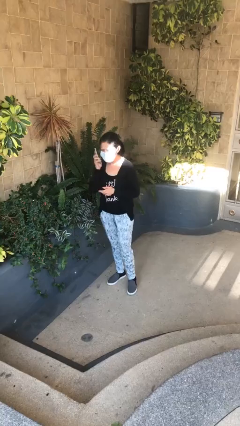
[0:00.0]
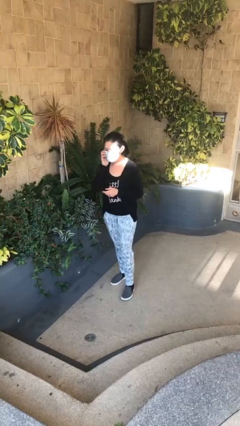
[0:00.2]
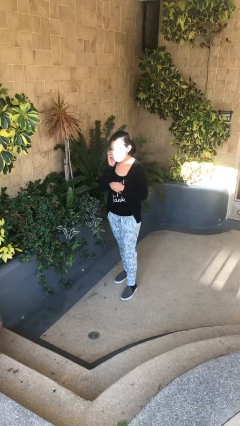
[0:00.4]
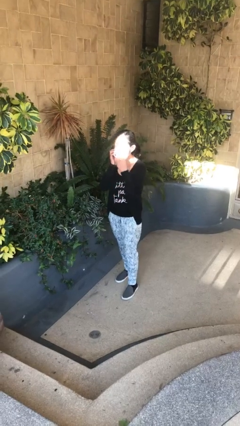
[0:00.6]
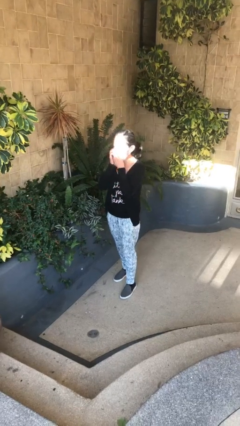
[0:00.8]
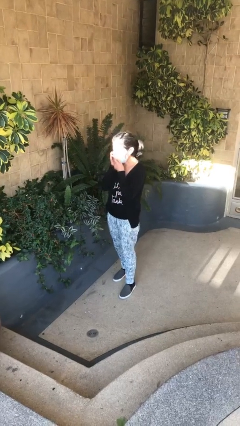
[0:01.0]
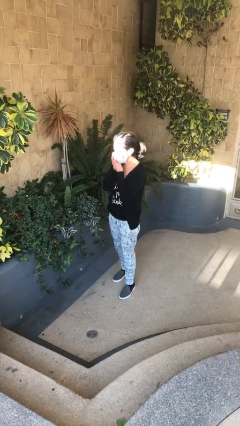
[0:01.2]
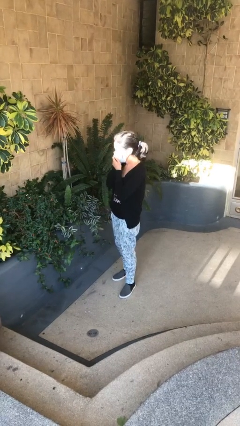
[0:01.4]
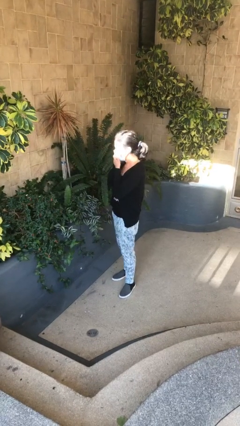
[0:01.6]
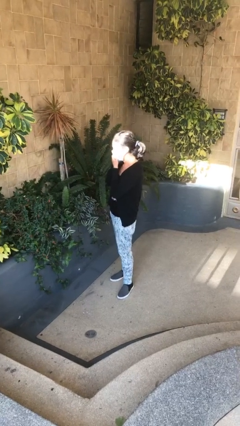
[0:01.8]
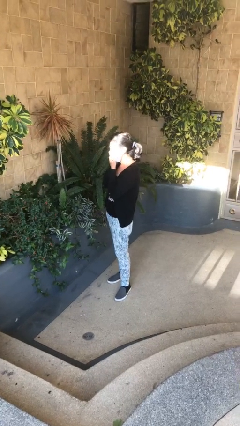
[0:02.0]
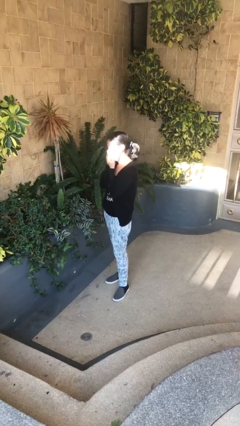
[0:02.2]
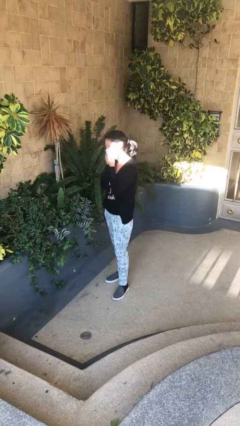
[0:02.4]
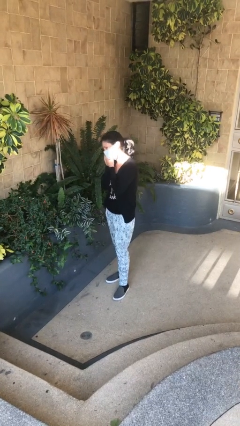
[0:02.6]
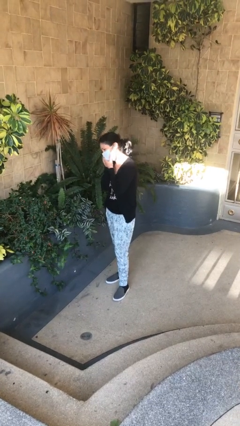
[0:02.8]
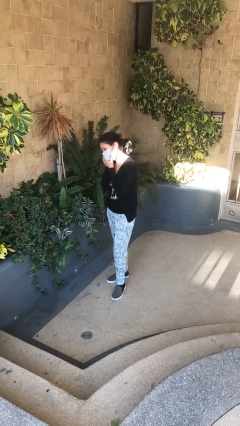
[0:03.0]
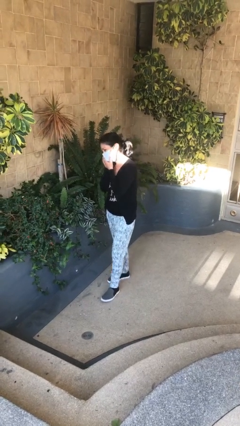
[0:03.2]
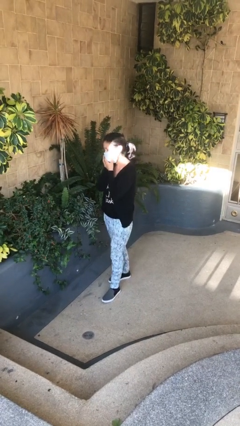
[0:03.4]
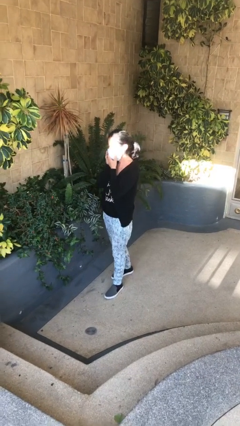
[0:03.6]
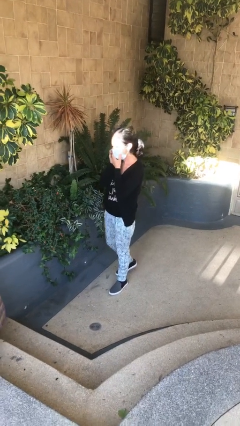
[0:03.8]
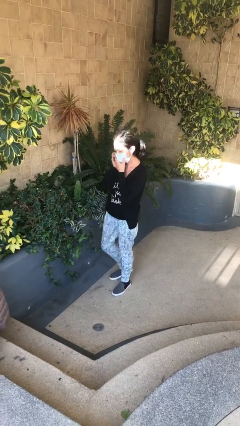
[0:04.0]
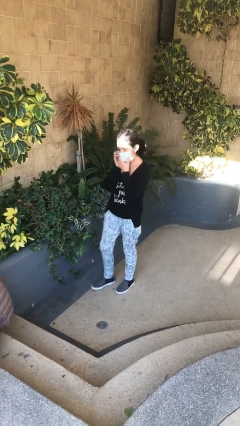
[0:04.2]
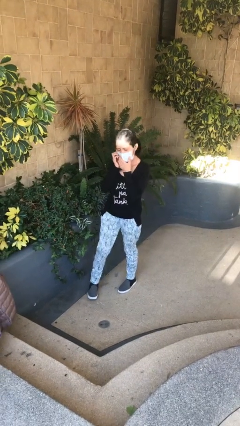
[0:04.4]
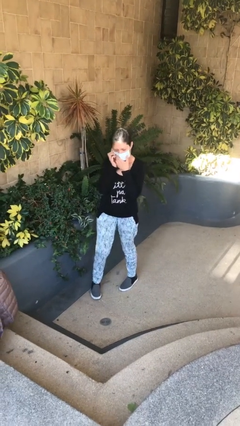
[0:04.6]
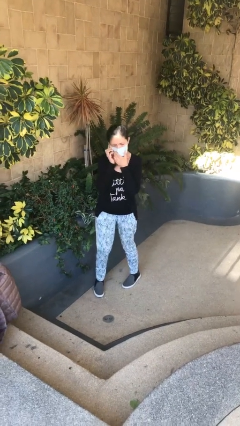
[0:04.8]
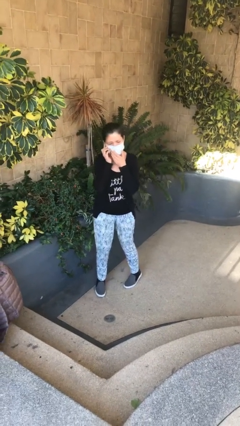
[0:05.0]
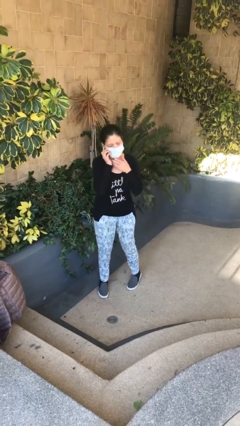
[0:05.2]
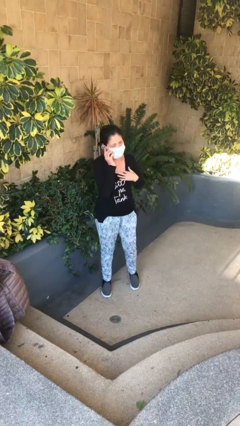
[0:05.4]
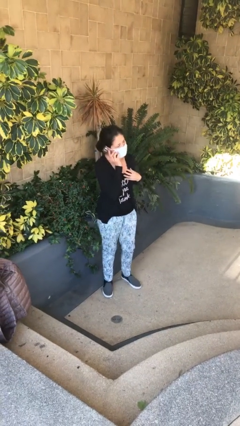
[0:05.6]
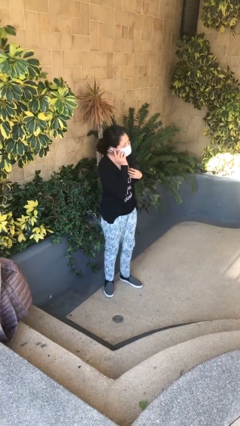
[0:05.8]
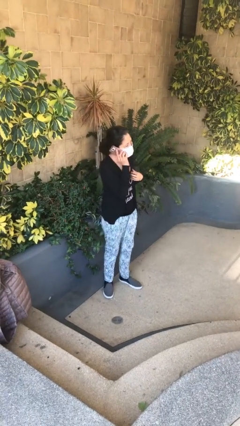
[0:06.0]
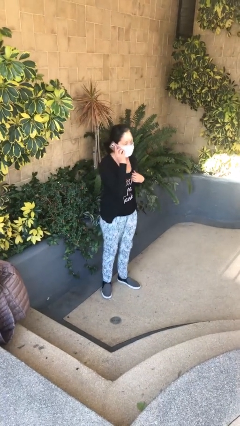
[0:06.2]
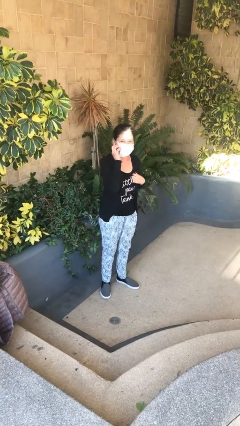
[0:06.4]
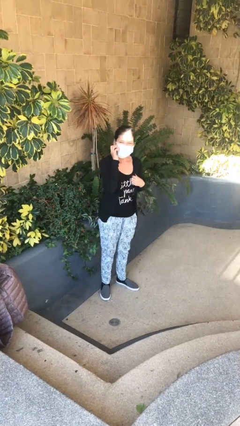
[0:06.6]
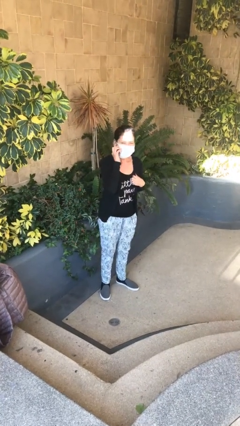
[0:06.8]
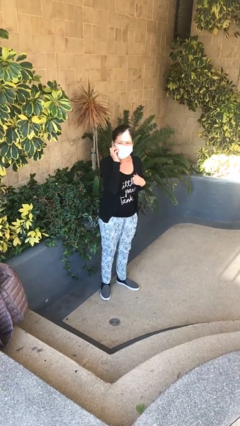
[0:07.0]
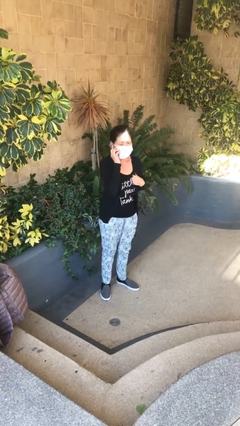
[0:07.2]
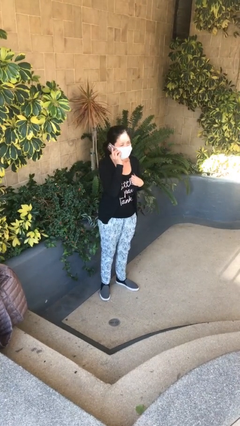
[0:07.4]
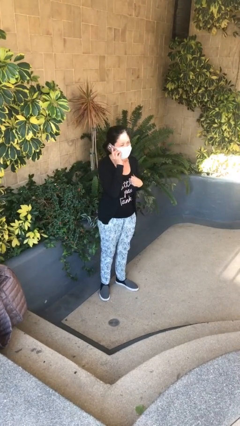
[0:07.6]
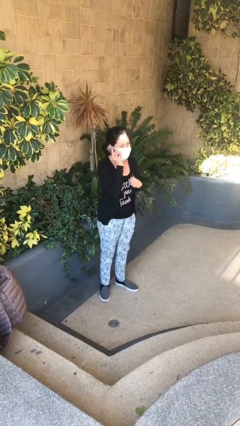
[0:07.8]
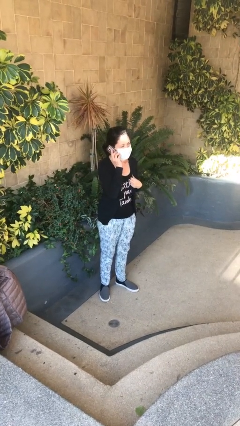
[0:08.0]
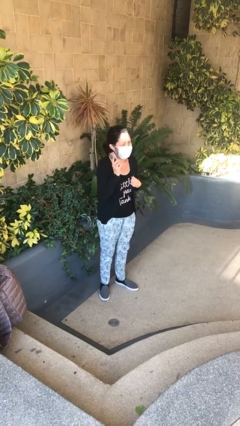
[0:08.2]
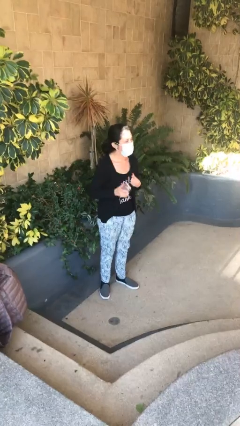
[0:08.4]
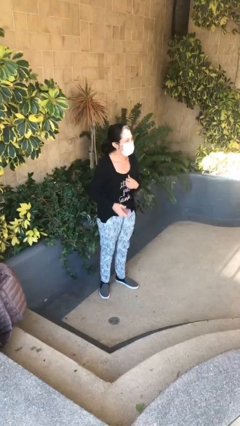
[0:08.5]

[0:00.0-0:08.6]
person talks on phone

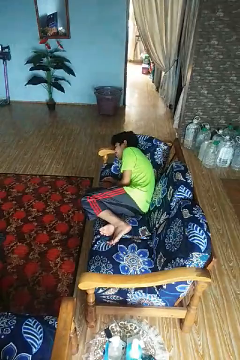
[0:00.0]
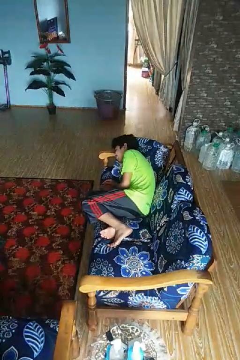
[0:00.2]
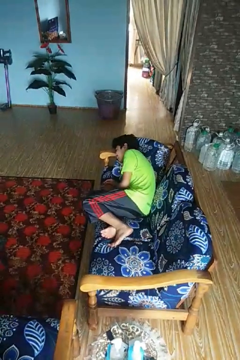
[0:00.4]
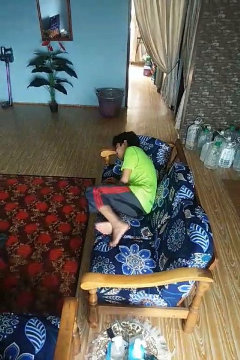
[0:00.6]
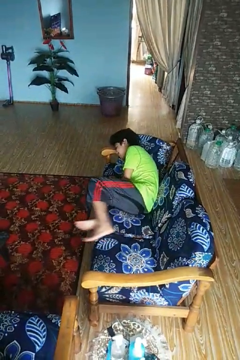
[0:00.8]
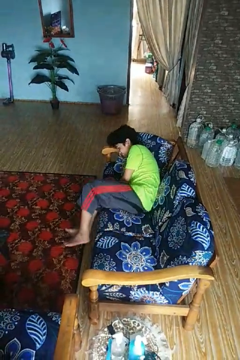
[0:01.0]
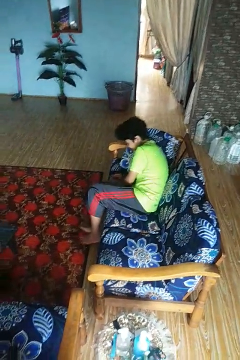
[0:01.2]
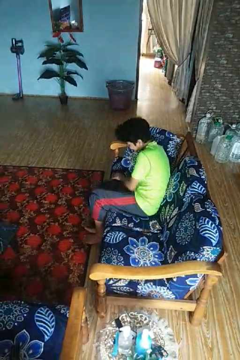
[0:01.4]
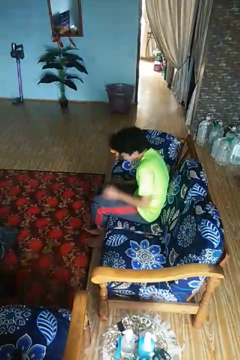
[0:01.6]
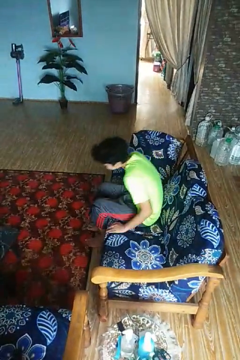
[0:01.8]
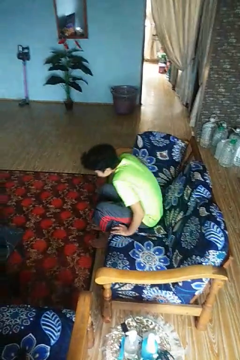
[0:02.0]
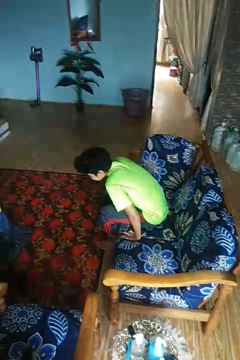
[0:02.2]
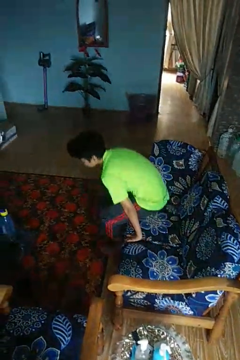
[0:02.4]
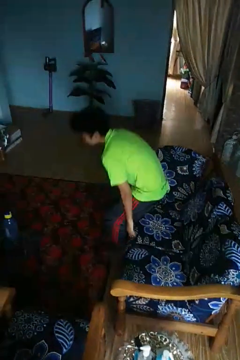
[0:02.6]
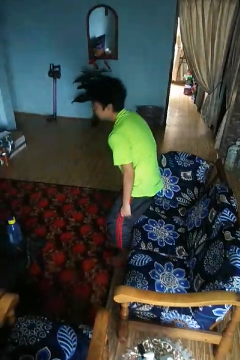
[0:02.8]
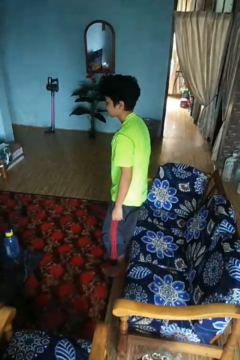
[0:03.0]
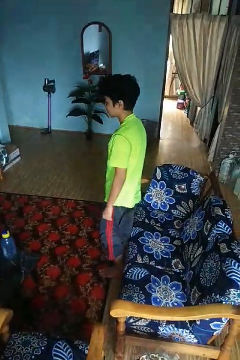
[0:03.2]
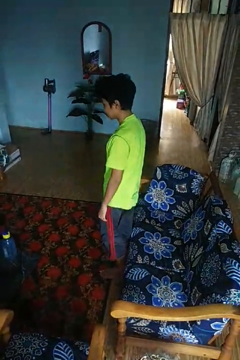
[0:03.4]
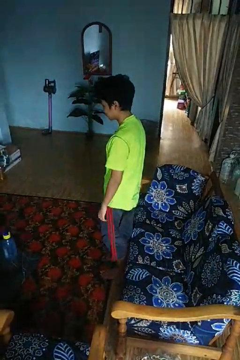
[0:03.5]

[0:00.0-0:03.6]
person stands up

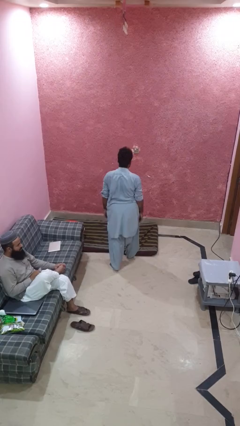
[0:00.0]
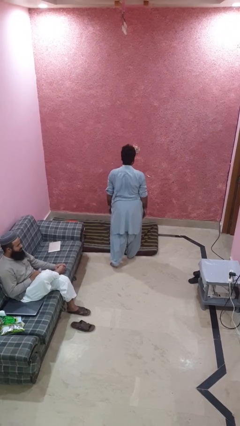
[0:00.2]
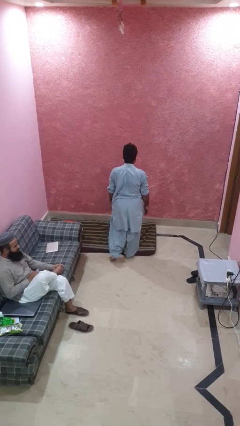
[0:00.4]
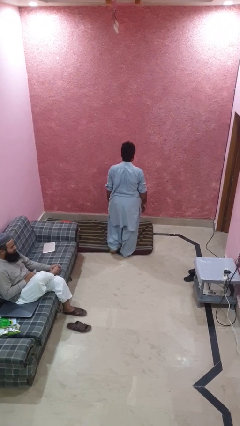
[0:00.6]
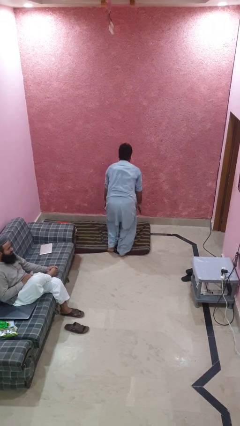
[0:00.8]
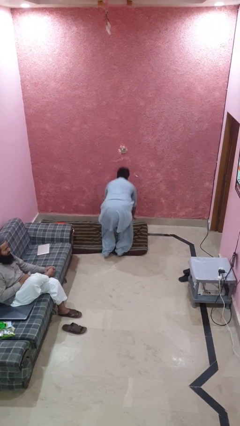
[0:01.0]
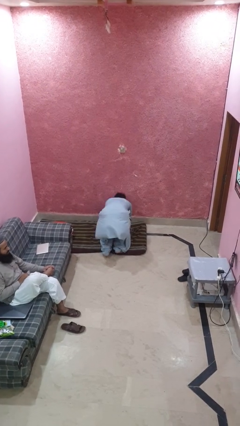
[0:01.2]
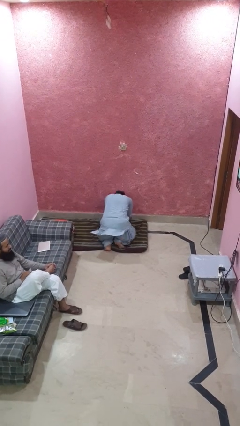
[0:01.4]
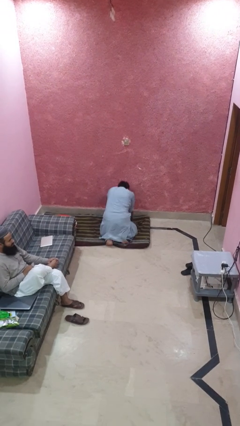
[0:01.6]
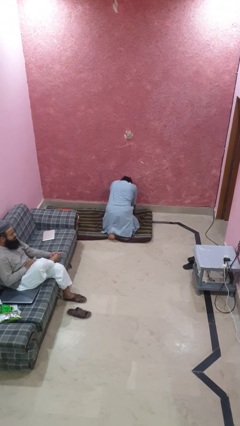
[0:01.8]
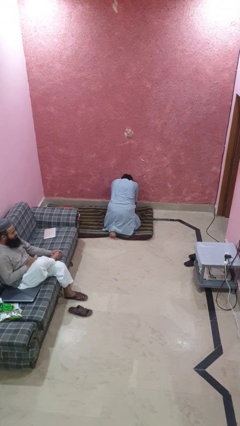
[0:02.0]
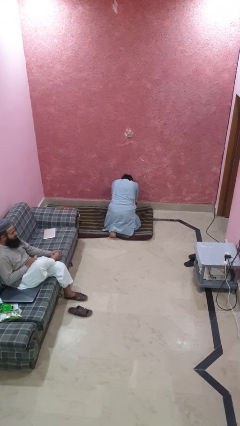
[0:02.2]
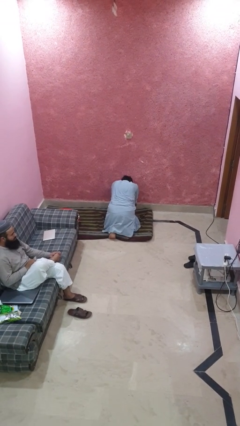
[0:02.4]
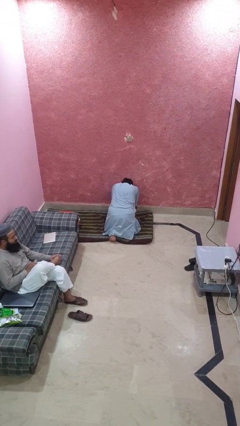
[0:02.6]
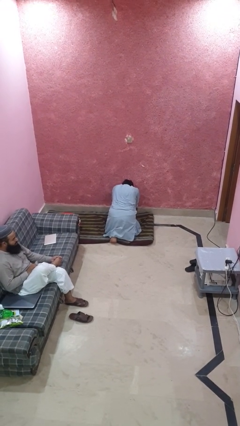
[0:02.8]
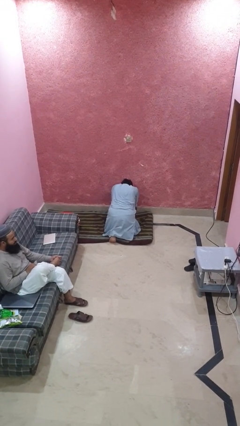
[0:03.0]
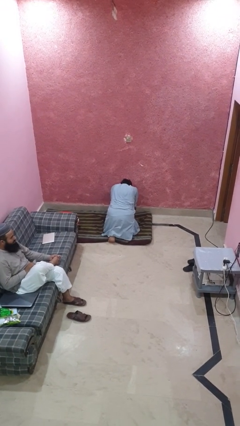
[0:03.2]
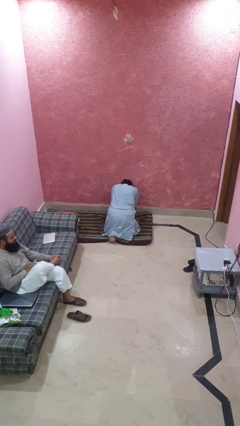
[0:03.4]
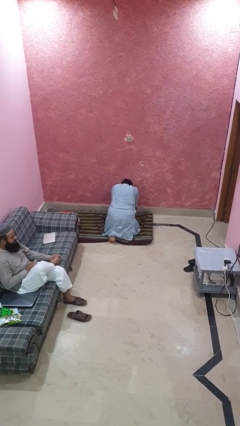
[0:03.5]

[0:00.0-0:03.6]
person trips on object on floor

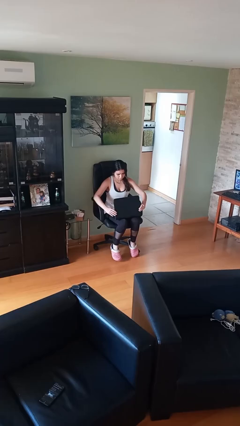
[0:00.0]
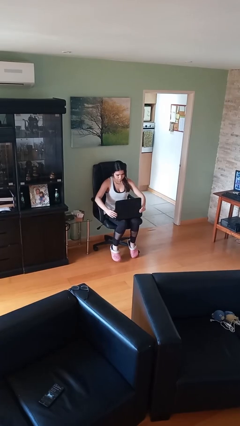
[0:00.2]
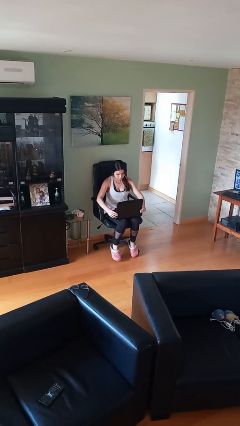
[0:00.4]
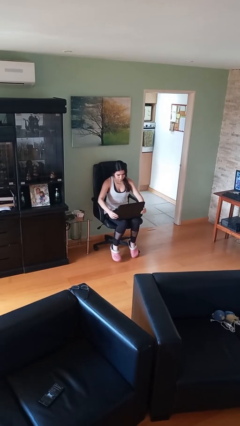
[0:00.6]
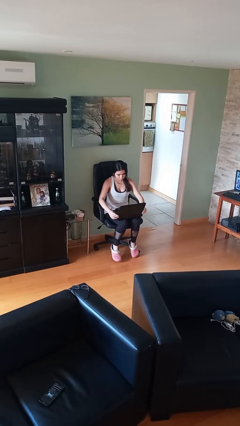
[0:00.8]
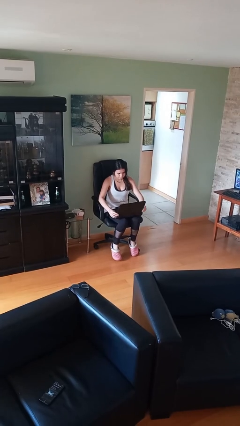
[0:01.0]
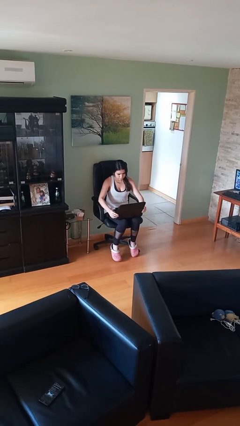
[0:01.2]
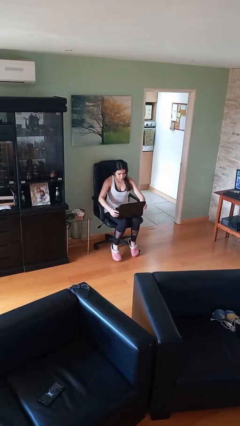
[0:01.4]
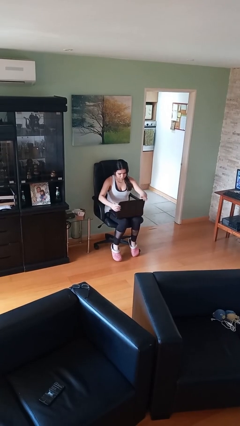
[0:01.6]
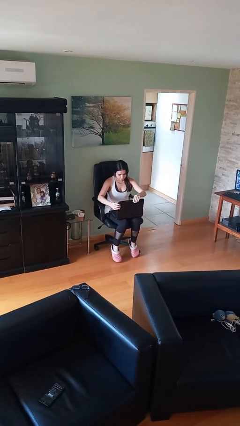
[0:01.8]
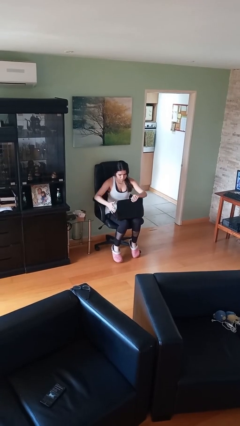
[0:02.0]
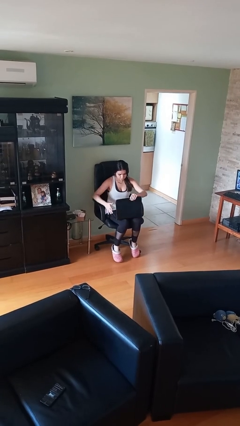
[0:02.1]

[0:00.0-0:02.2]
person interacts with laptop
